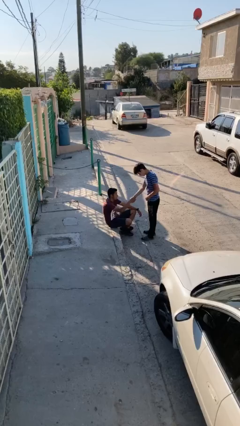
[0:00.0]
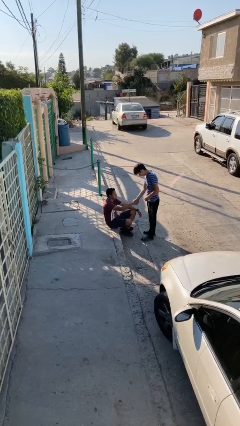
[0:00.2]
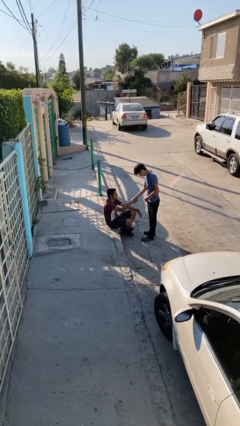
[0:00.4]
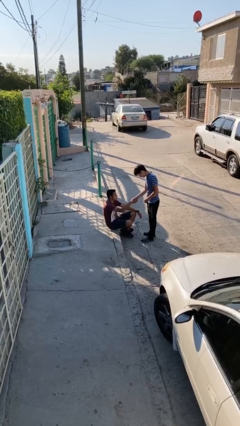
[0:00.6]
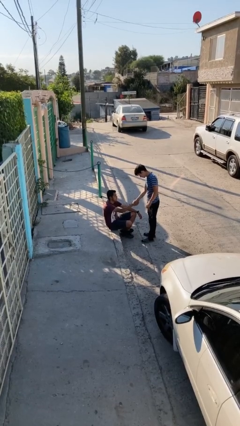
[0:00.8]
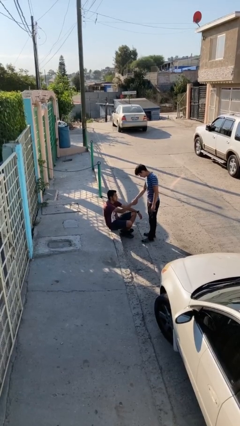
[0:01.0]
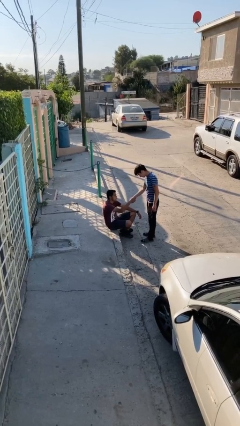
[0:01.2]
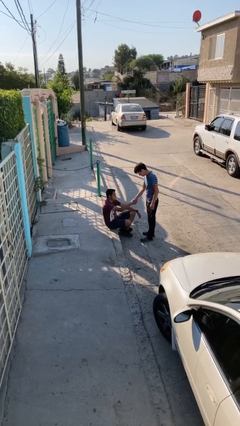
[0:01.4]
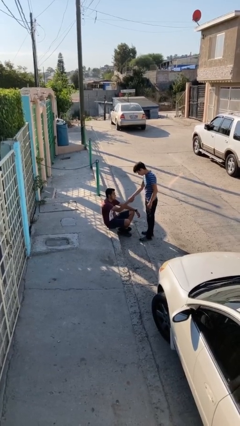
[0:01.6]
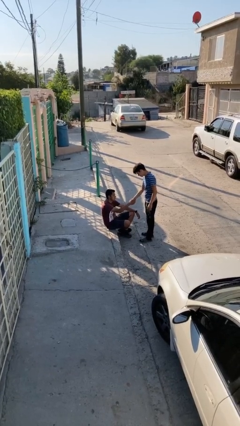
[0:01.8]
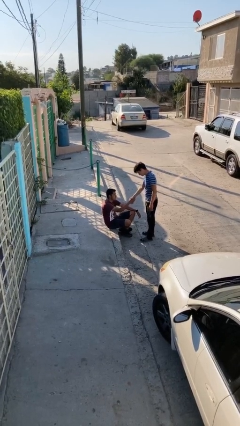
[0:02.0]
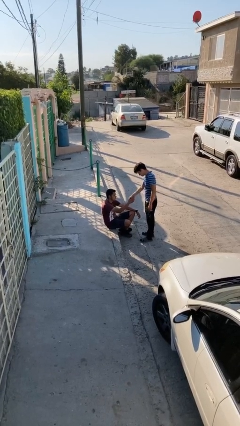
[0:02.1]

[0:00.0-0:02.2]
person shakes hand

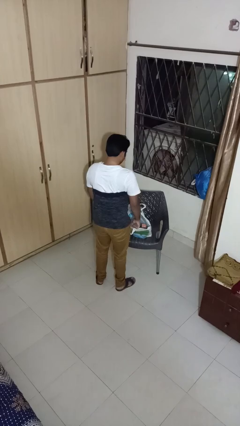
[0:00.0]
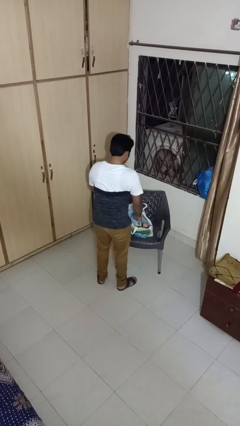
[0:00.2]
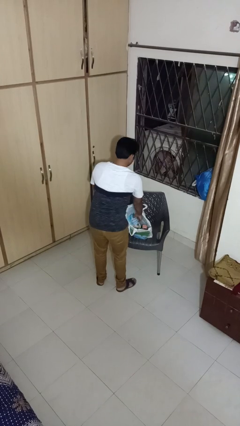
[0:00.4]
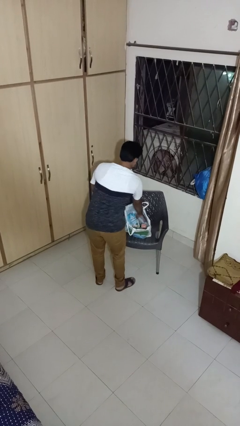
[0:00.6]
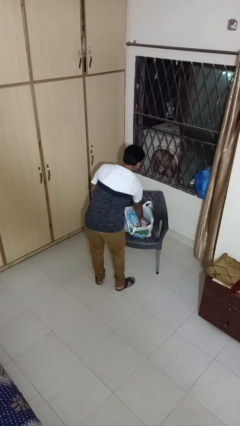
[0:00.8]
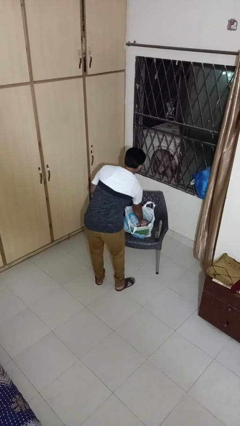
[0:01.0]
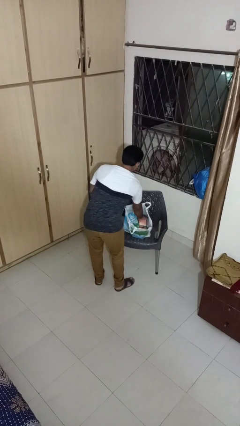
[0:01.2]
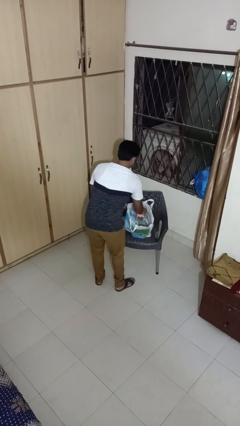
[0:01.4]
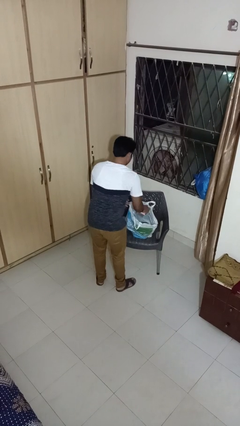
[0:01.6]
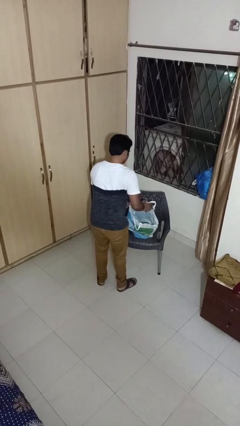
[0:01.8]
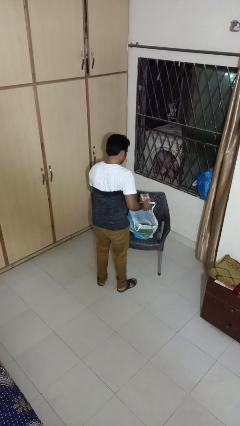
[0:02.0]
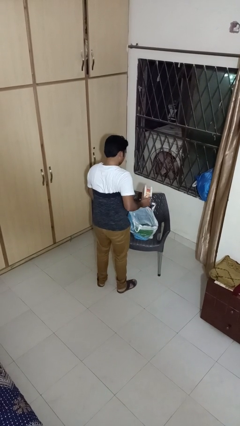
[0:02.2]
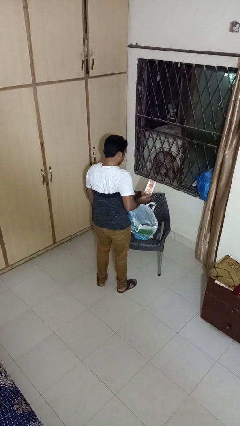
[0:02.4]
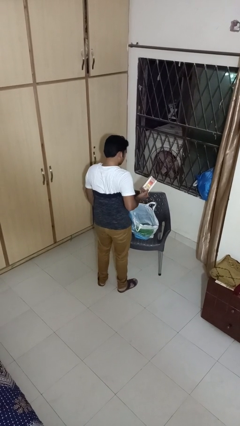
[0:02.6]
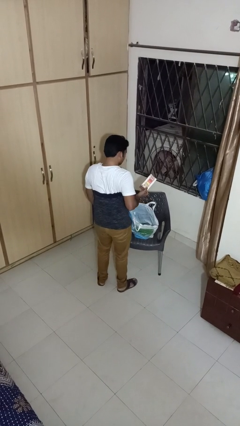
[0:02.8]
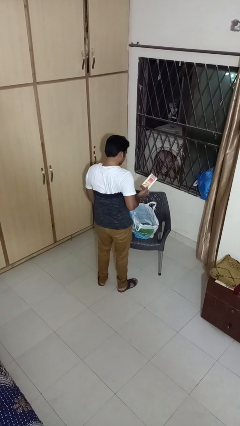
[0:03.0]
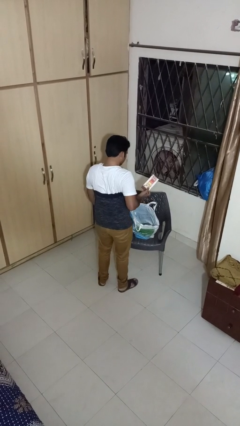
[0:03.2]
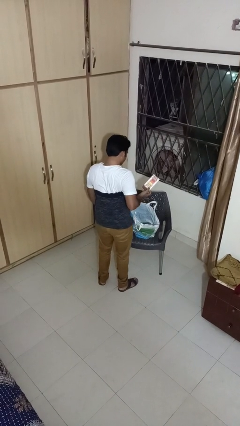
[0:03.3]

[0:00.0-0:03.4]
person takes object from bag

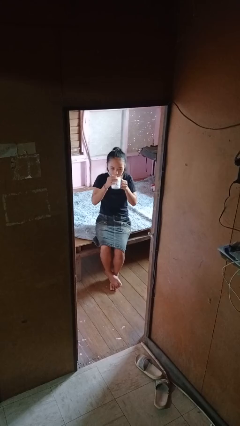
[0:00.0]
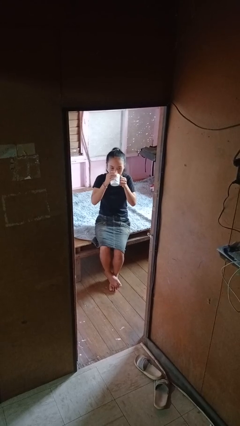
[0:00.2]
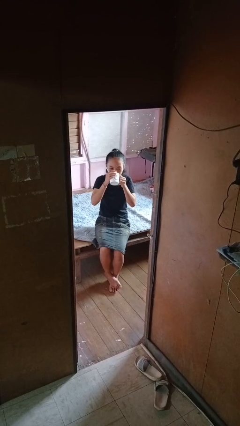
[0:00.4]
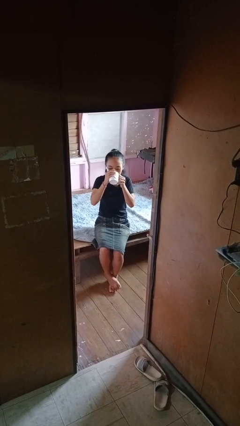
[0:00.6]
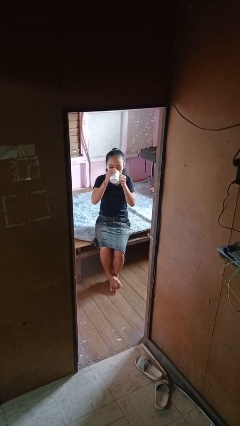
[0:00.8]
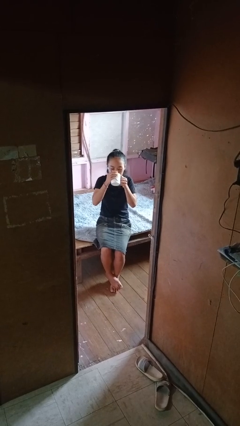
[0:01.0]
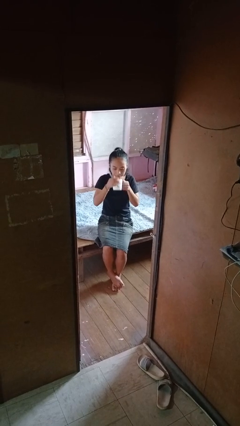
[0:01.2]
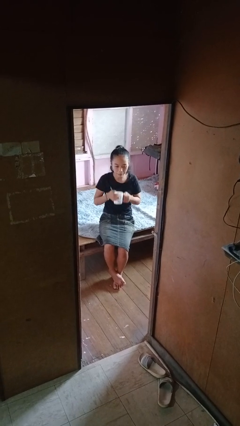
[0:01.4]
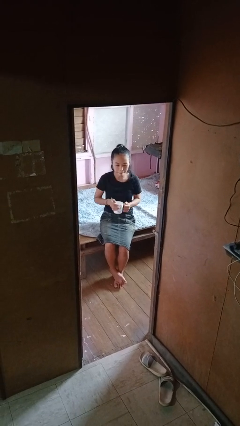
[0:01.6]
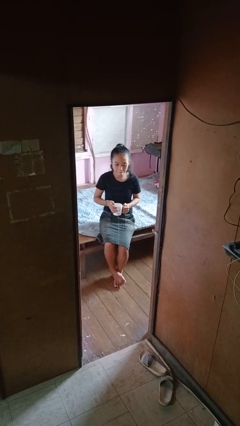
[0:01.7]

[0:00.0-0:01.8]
person drinks from mug

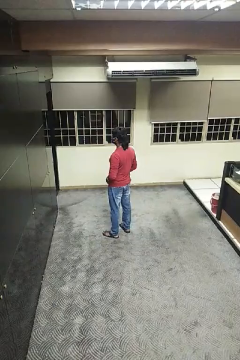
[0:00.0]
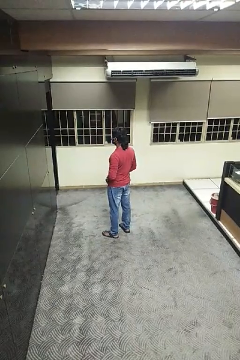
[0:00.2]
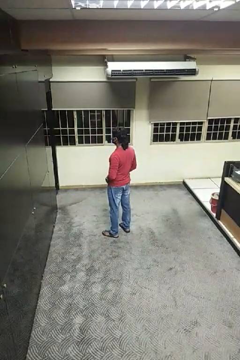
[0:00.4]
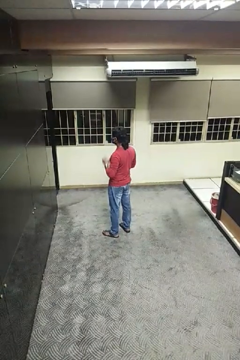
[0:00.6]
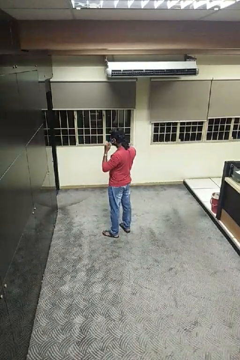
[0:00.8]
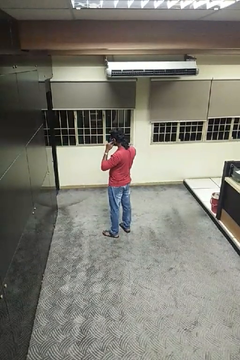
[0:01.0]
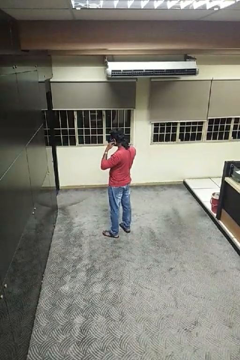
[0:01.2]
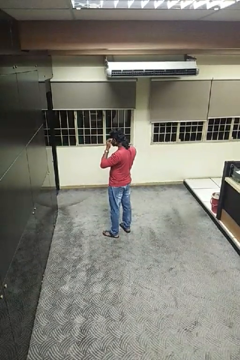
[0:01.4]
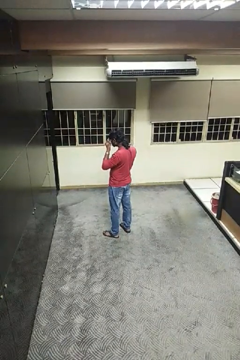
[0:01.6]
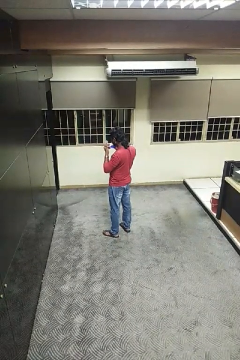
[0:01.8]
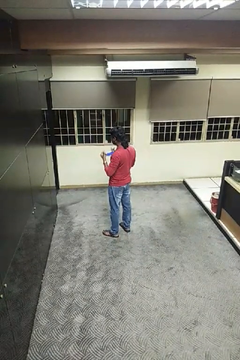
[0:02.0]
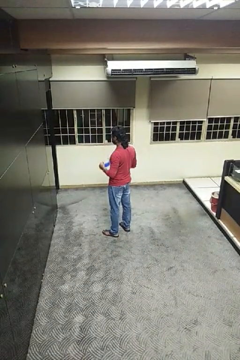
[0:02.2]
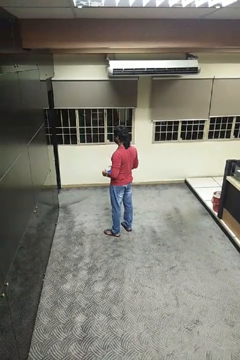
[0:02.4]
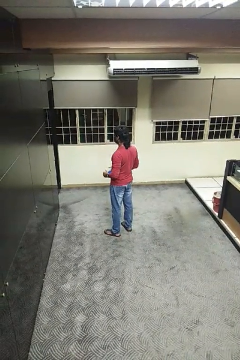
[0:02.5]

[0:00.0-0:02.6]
person takes off facemask

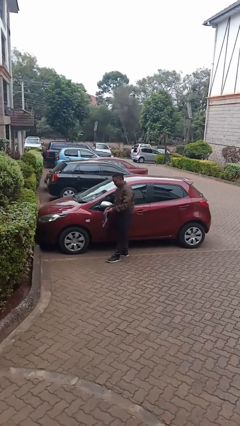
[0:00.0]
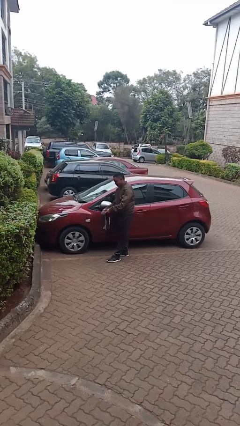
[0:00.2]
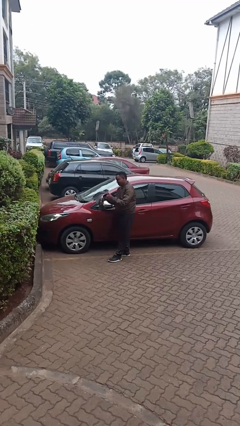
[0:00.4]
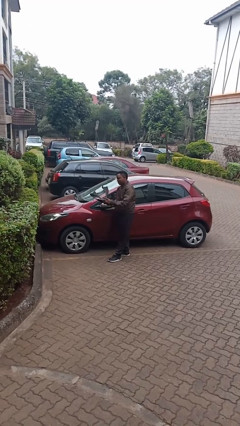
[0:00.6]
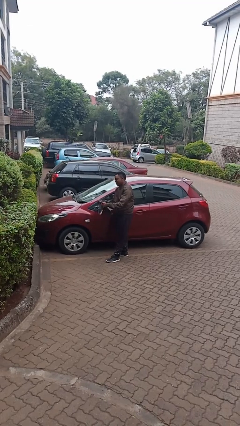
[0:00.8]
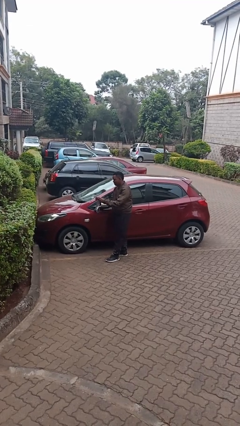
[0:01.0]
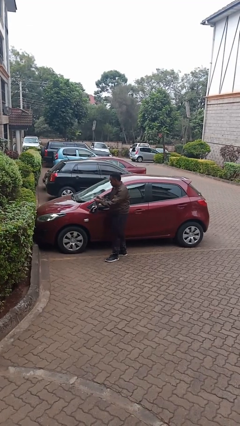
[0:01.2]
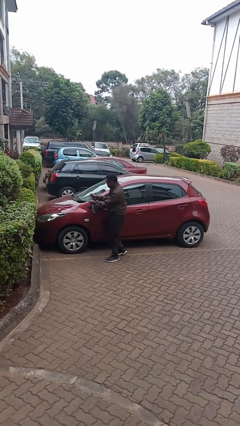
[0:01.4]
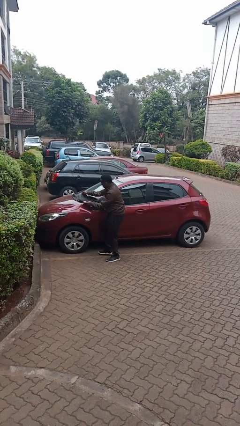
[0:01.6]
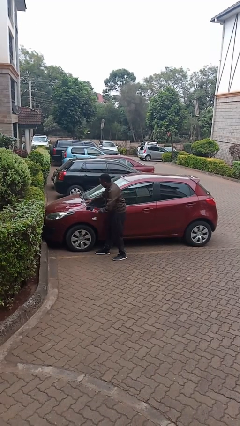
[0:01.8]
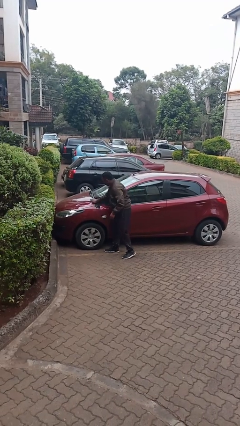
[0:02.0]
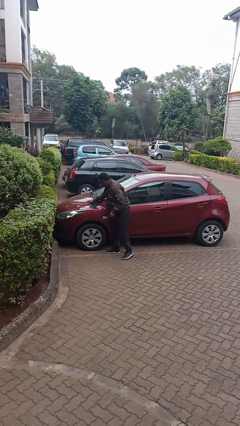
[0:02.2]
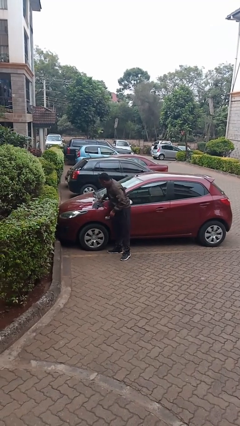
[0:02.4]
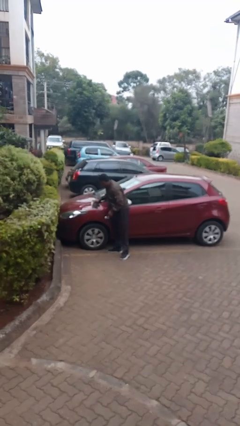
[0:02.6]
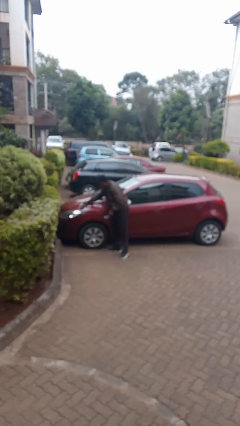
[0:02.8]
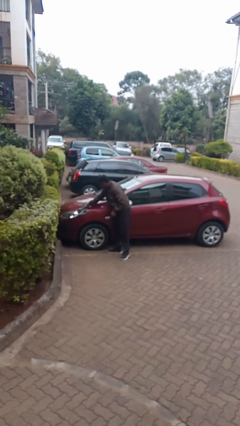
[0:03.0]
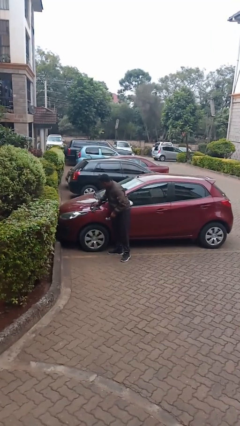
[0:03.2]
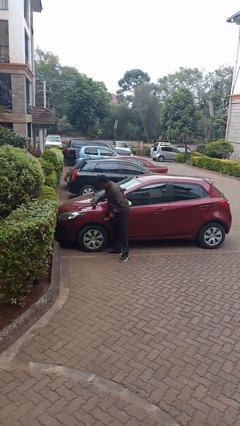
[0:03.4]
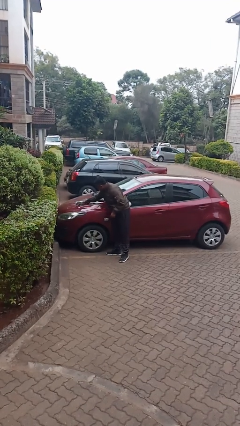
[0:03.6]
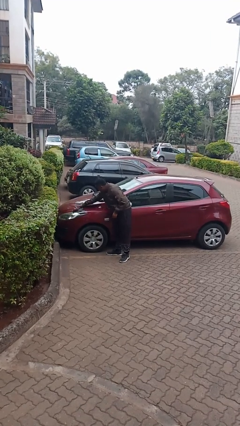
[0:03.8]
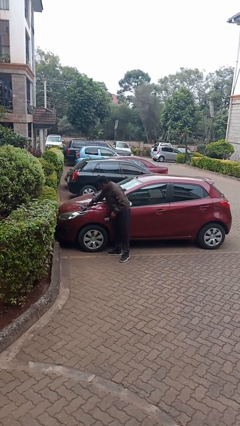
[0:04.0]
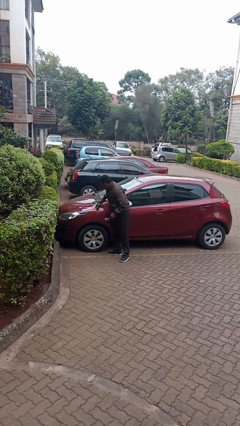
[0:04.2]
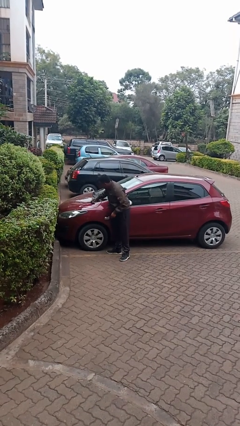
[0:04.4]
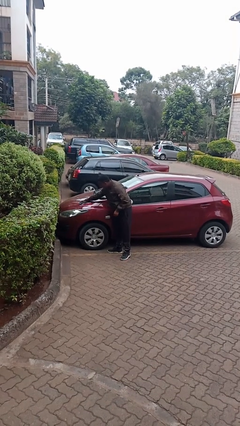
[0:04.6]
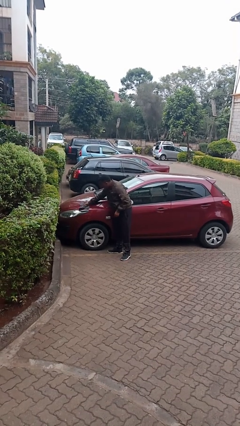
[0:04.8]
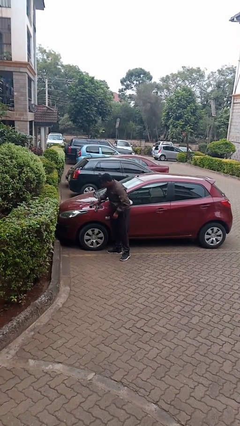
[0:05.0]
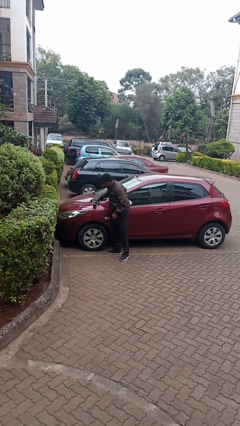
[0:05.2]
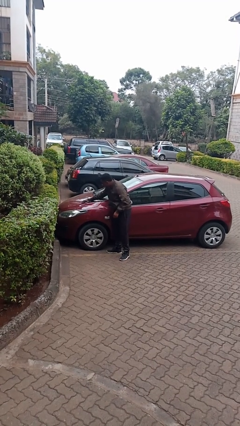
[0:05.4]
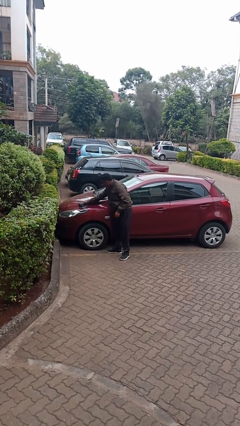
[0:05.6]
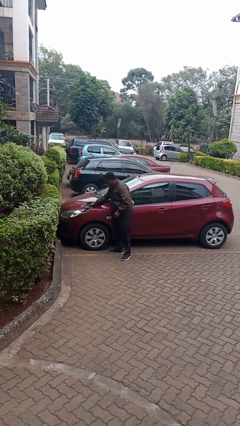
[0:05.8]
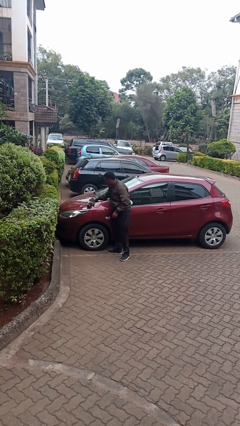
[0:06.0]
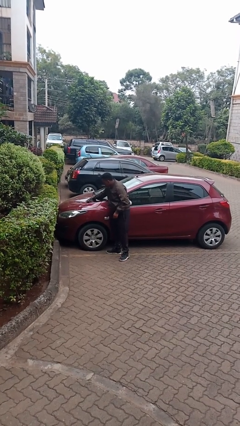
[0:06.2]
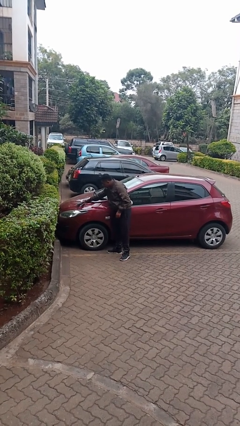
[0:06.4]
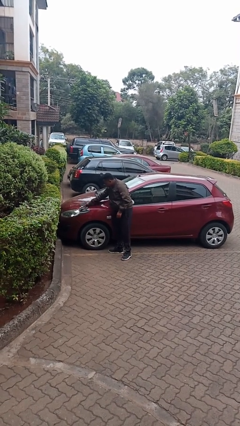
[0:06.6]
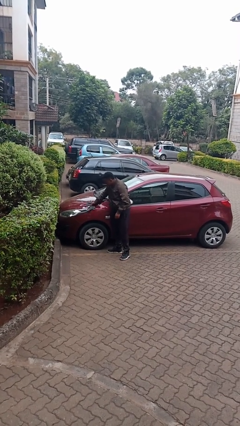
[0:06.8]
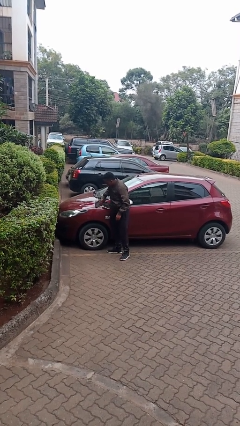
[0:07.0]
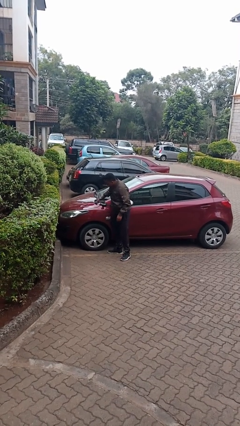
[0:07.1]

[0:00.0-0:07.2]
person polishes car with rag

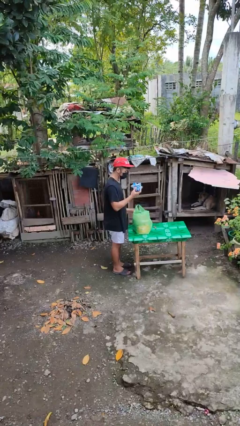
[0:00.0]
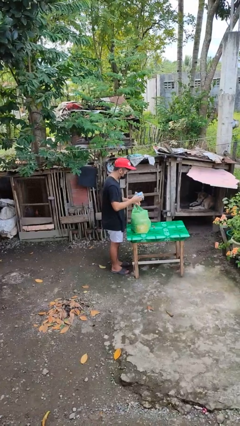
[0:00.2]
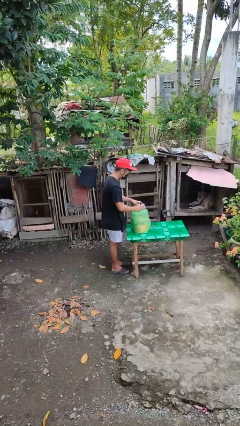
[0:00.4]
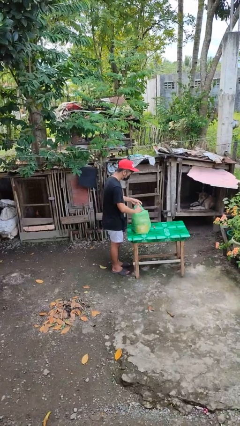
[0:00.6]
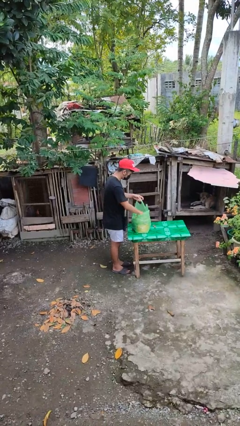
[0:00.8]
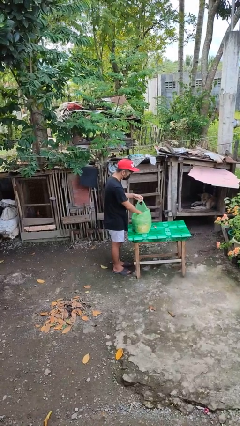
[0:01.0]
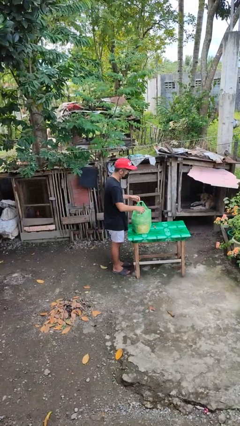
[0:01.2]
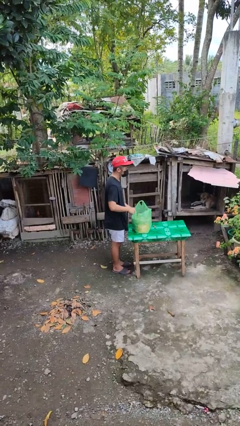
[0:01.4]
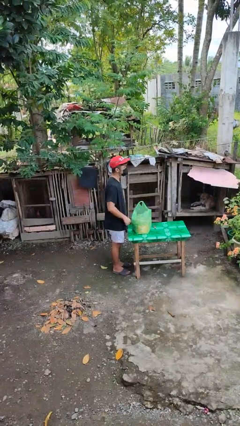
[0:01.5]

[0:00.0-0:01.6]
person puts object into bag
